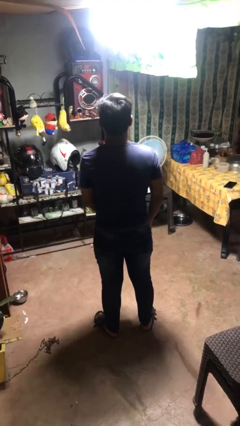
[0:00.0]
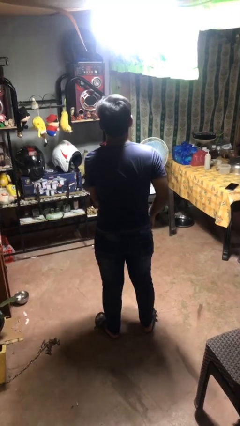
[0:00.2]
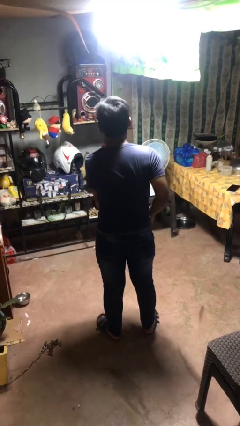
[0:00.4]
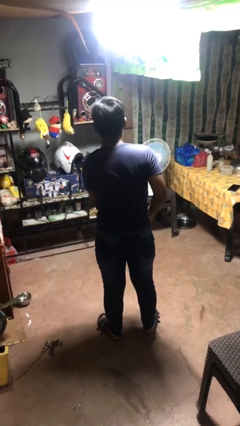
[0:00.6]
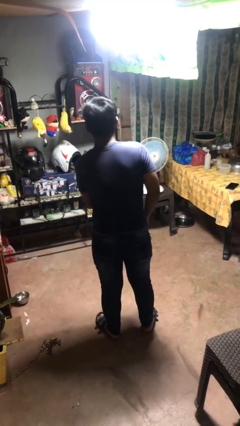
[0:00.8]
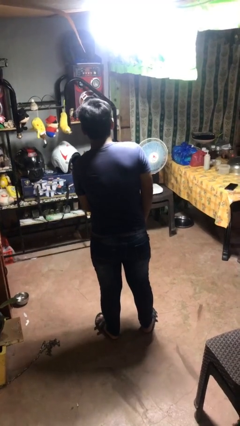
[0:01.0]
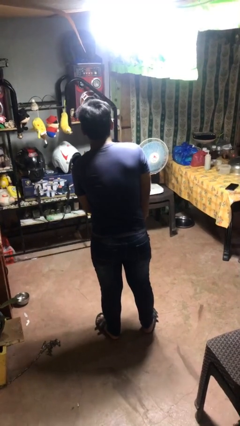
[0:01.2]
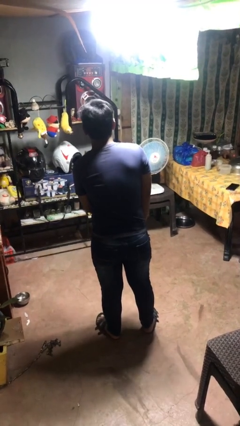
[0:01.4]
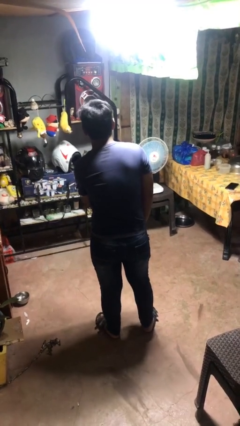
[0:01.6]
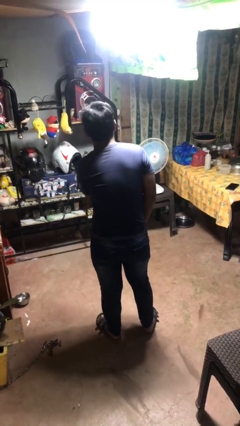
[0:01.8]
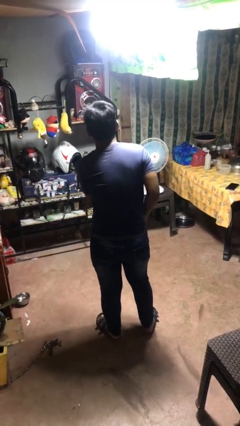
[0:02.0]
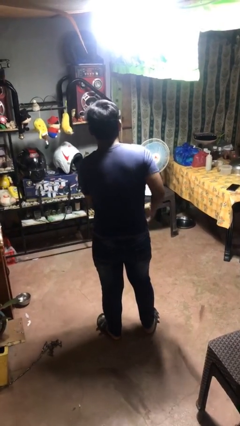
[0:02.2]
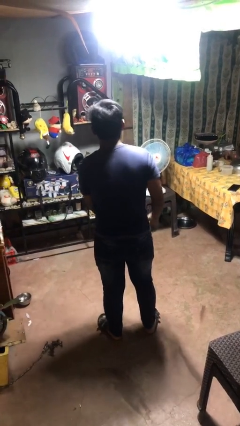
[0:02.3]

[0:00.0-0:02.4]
person puts hands in back pockets

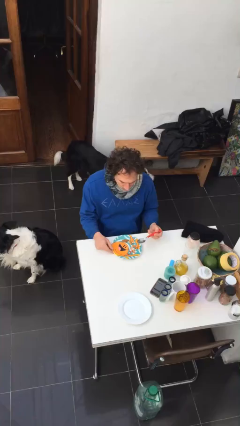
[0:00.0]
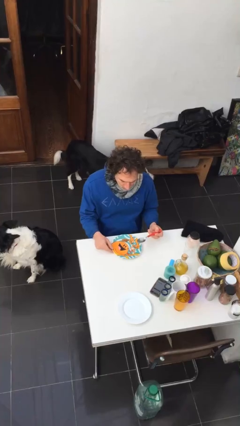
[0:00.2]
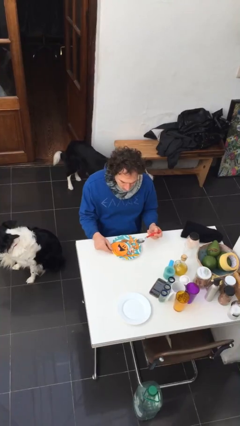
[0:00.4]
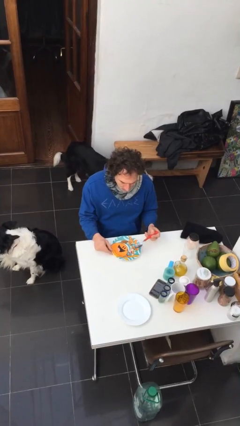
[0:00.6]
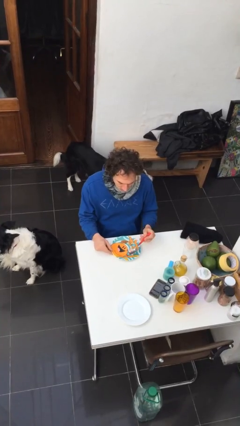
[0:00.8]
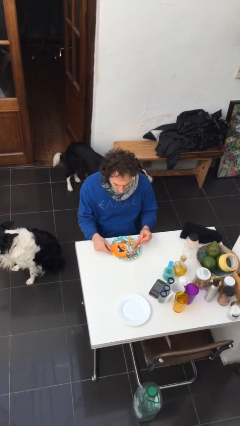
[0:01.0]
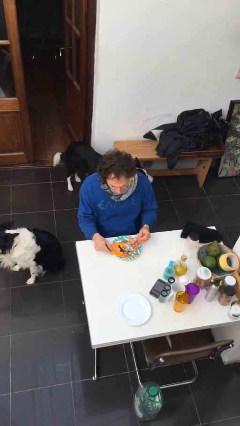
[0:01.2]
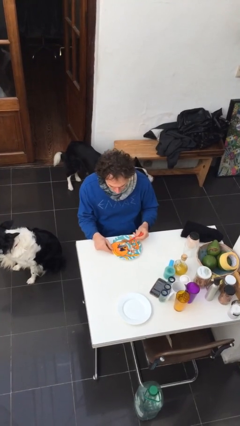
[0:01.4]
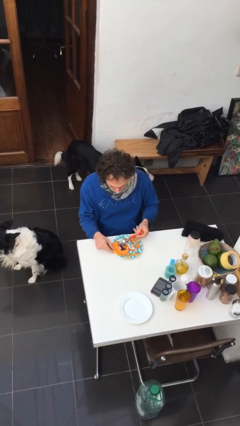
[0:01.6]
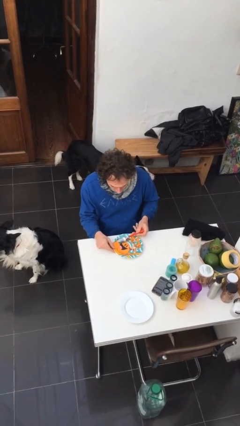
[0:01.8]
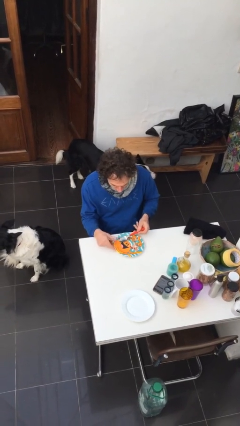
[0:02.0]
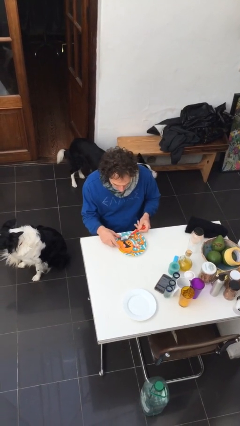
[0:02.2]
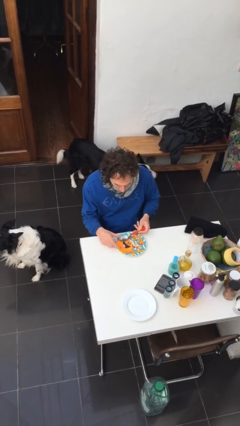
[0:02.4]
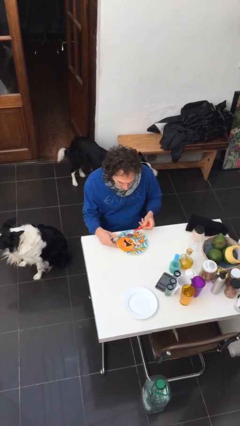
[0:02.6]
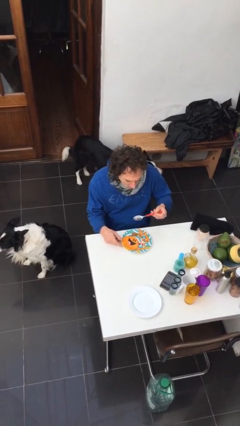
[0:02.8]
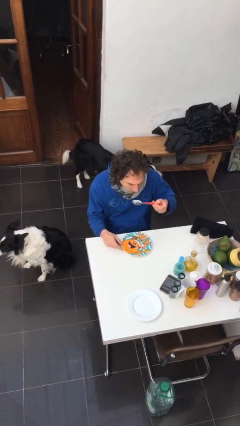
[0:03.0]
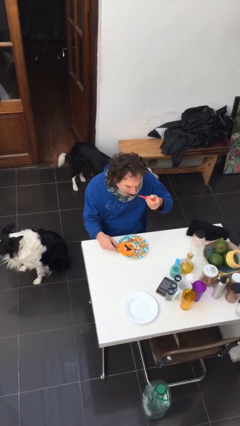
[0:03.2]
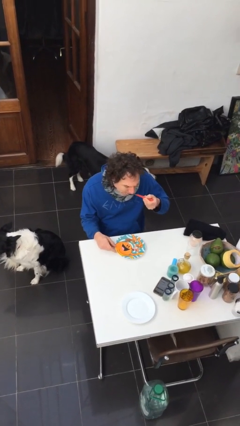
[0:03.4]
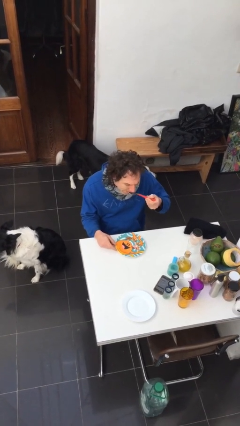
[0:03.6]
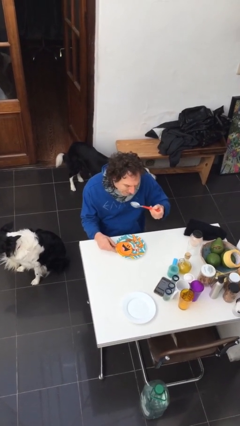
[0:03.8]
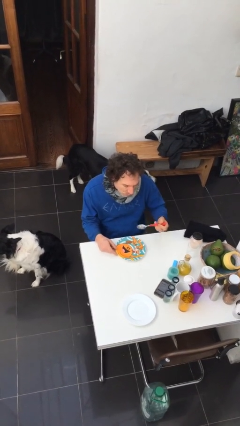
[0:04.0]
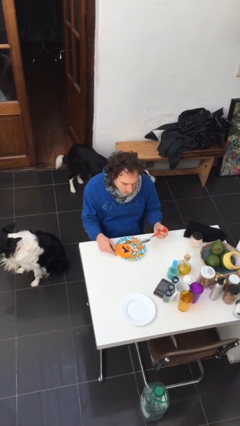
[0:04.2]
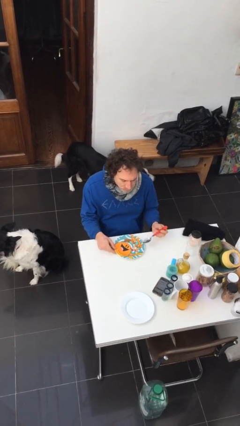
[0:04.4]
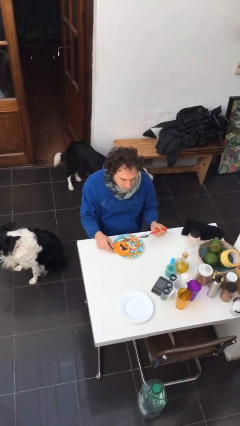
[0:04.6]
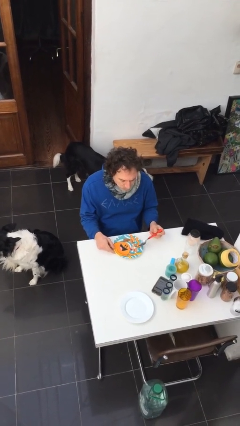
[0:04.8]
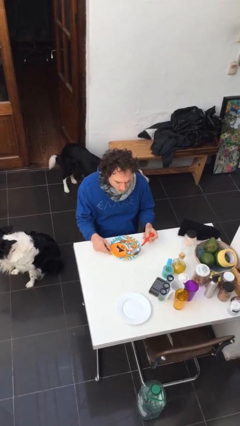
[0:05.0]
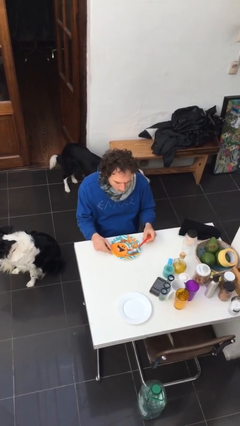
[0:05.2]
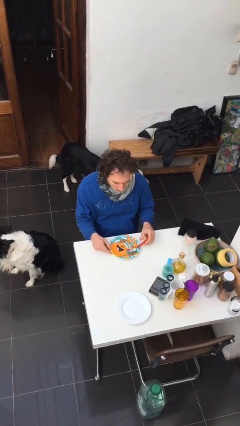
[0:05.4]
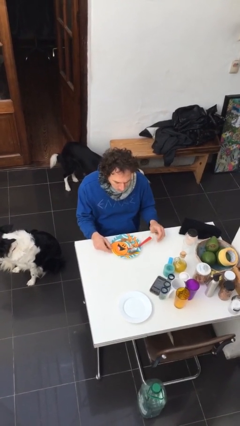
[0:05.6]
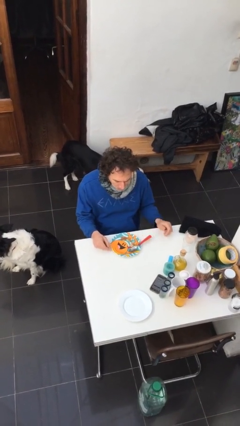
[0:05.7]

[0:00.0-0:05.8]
person eats with utensil

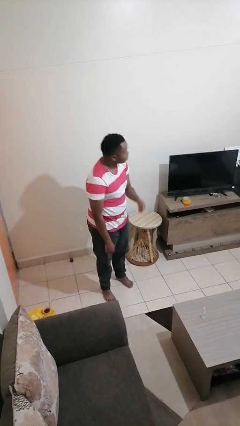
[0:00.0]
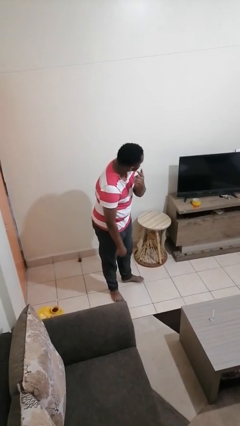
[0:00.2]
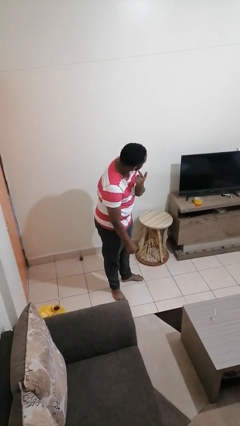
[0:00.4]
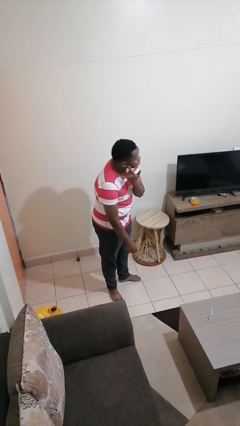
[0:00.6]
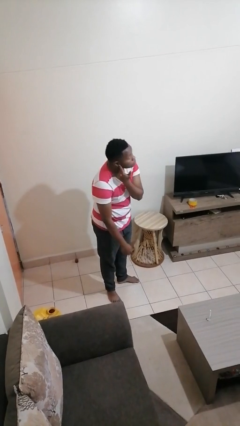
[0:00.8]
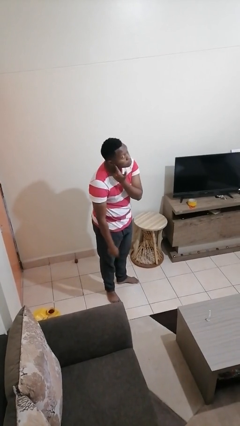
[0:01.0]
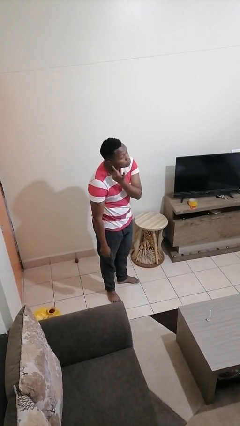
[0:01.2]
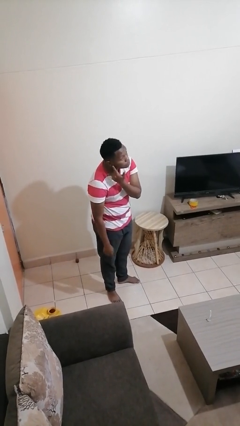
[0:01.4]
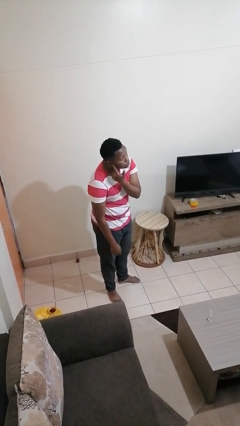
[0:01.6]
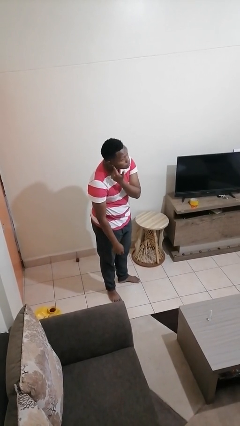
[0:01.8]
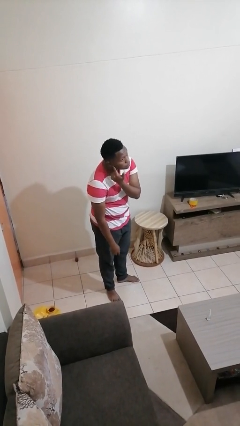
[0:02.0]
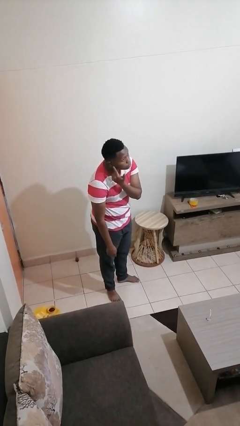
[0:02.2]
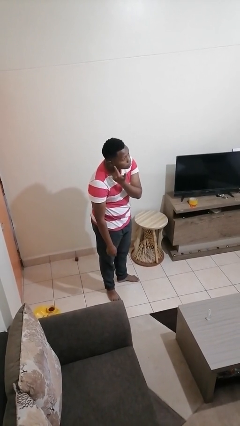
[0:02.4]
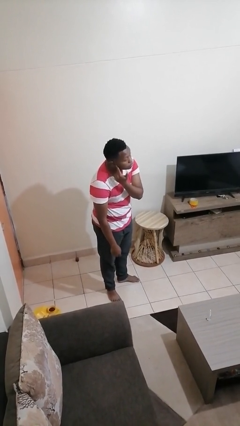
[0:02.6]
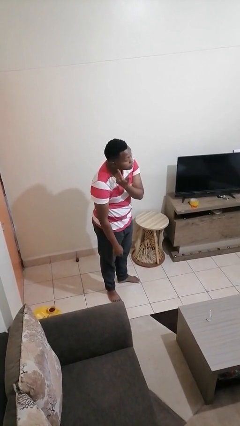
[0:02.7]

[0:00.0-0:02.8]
person gestures listen closely

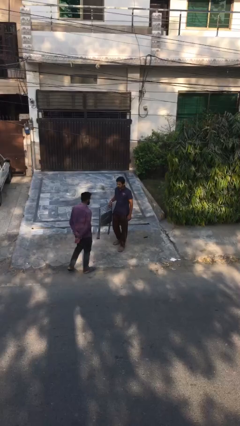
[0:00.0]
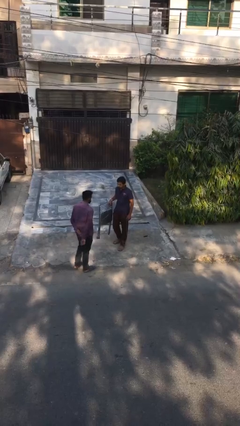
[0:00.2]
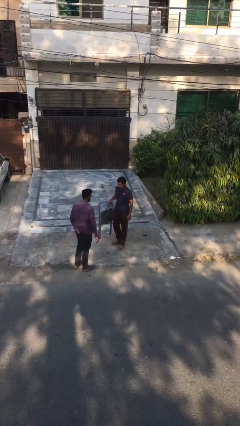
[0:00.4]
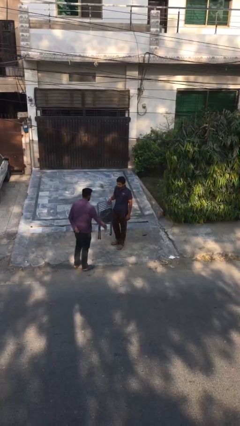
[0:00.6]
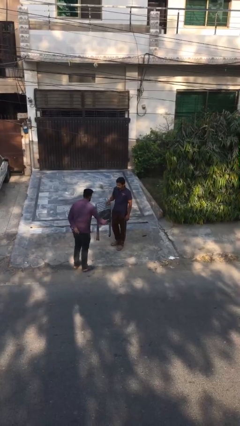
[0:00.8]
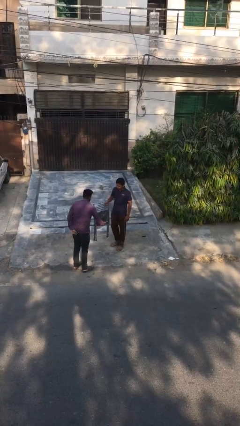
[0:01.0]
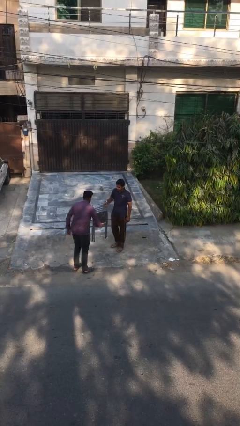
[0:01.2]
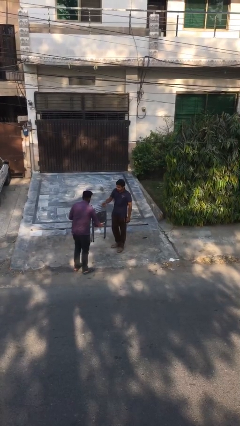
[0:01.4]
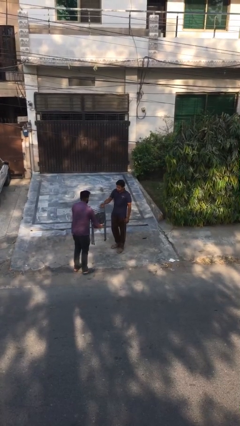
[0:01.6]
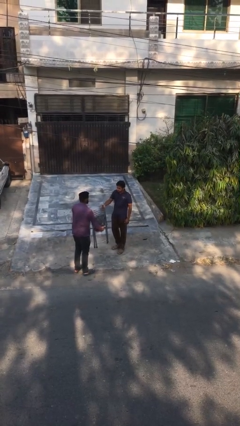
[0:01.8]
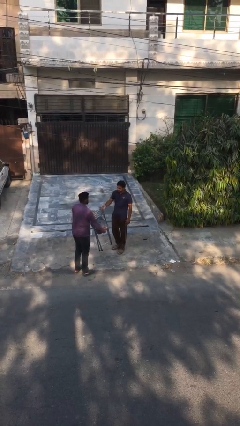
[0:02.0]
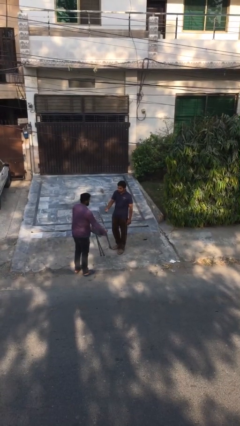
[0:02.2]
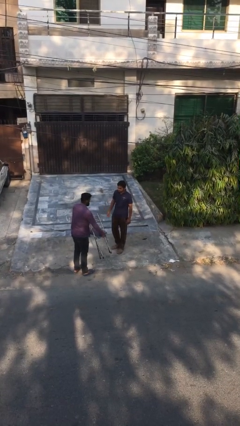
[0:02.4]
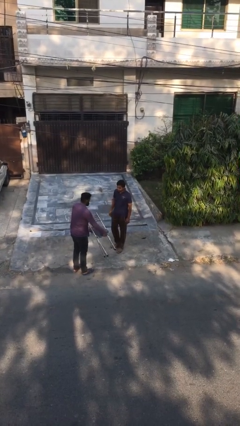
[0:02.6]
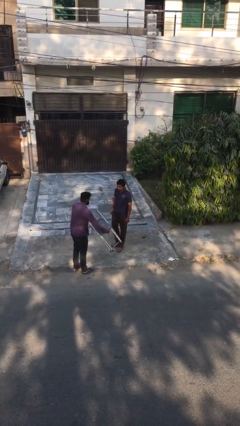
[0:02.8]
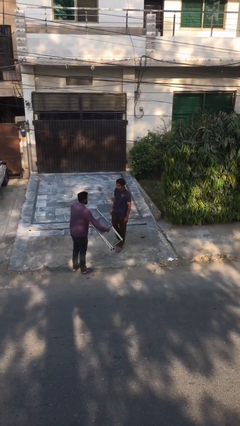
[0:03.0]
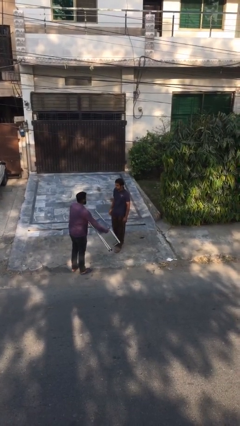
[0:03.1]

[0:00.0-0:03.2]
person transfers object to person

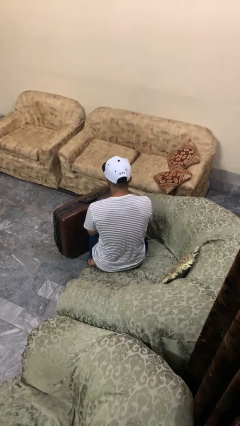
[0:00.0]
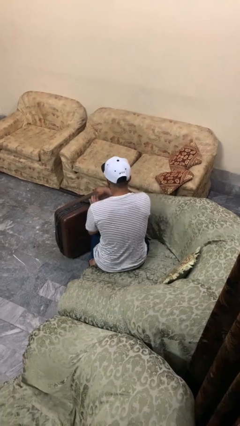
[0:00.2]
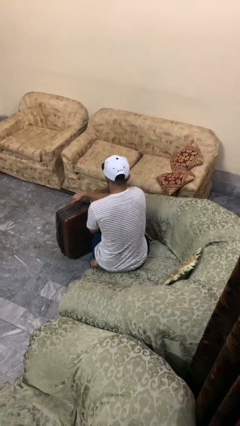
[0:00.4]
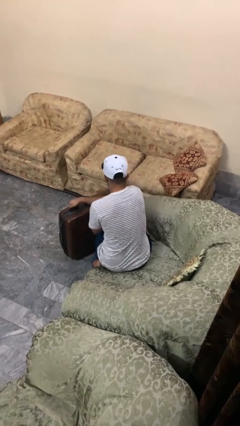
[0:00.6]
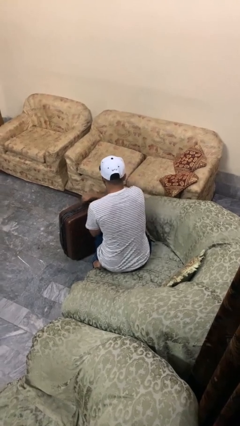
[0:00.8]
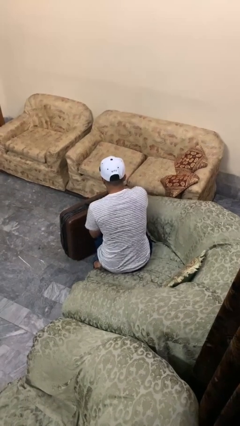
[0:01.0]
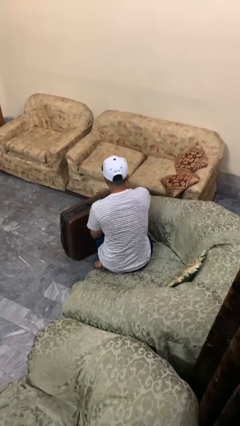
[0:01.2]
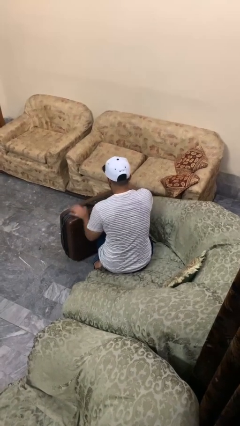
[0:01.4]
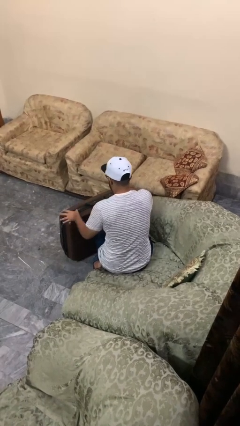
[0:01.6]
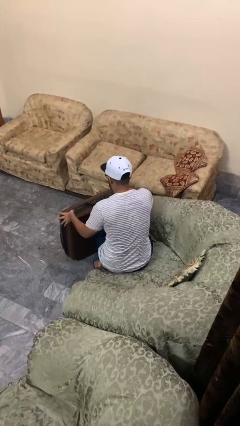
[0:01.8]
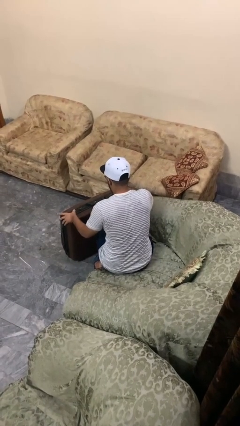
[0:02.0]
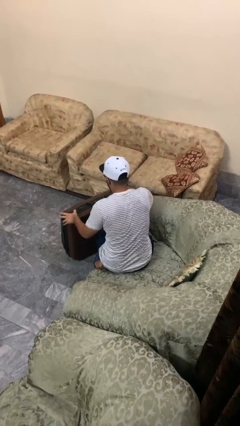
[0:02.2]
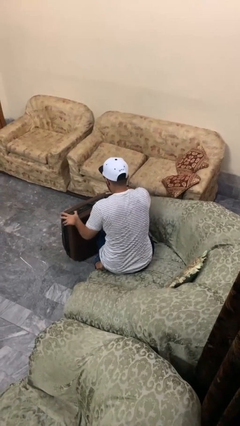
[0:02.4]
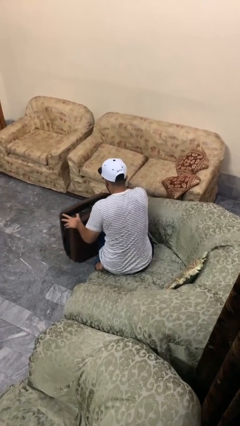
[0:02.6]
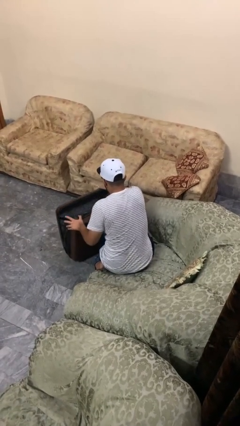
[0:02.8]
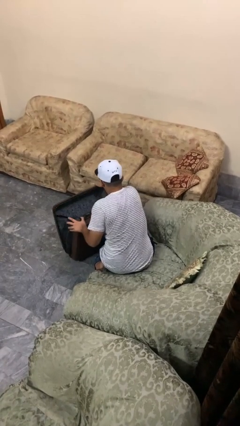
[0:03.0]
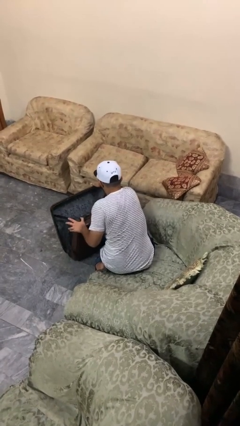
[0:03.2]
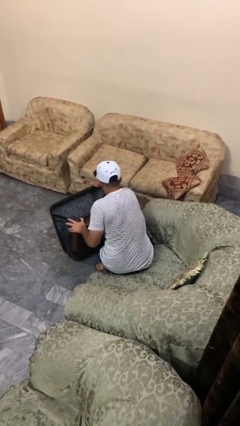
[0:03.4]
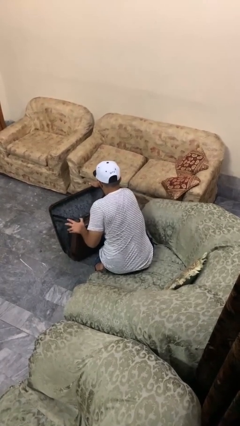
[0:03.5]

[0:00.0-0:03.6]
person opens suitcase

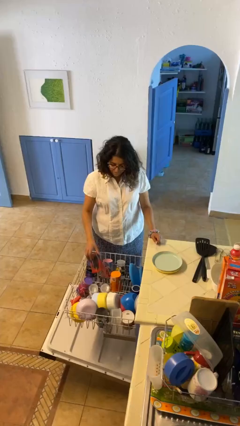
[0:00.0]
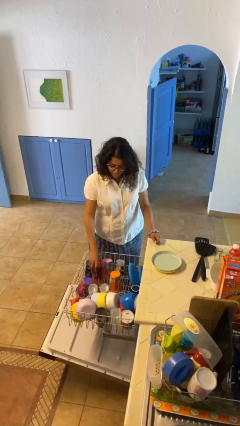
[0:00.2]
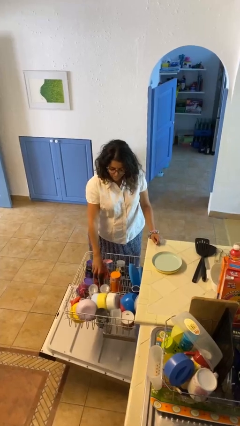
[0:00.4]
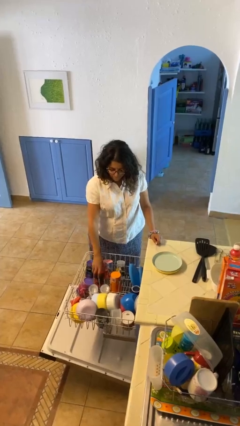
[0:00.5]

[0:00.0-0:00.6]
person loads dishwasher
